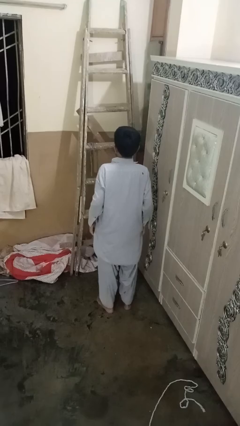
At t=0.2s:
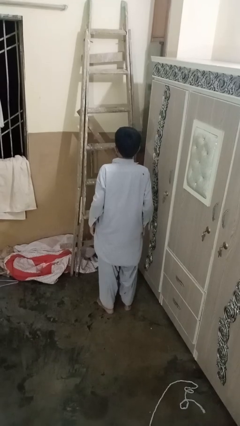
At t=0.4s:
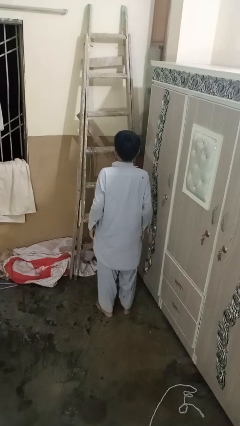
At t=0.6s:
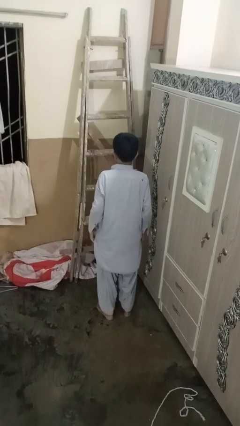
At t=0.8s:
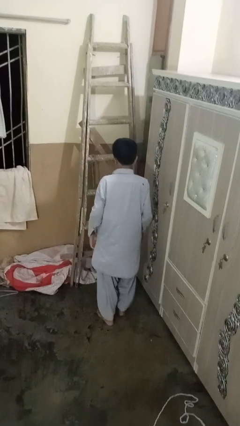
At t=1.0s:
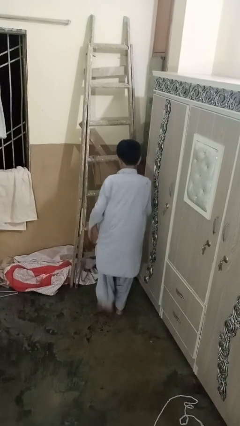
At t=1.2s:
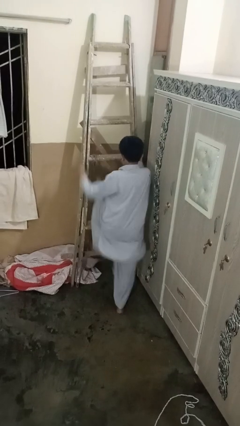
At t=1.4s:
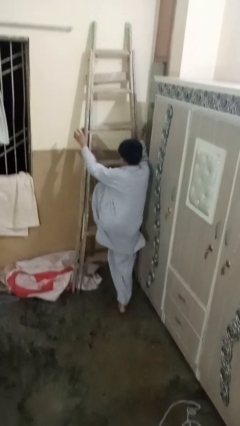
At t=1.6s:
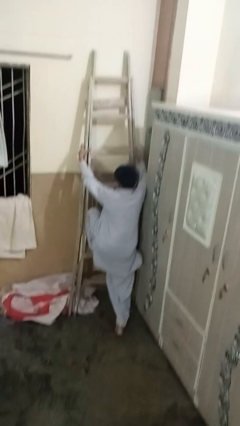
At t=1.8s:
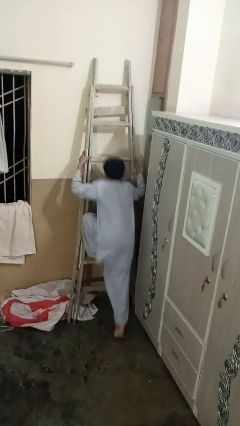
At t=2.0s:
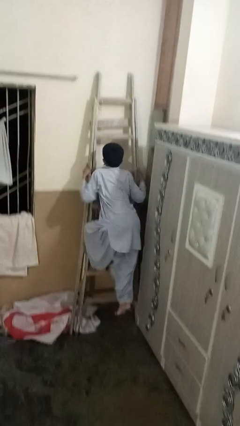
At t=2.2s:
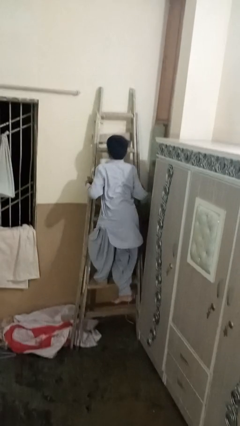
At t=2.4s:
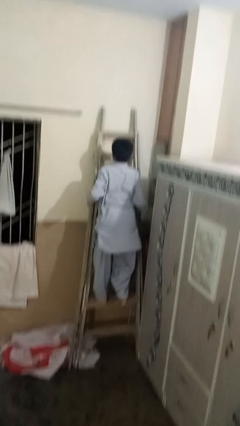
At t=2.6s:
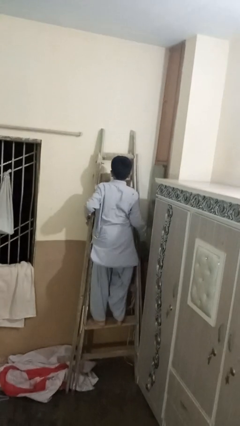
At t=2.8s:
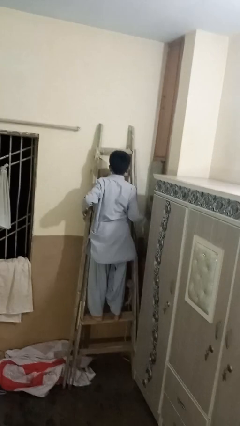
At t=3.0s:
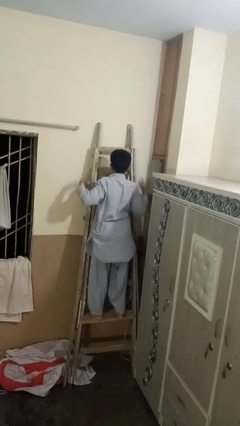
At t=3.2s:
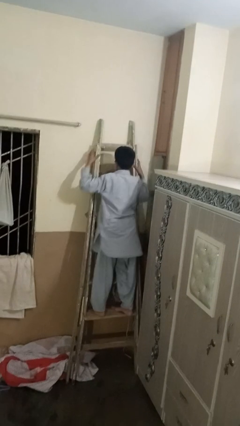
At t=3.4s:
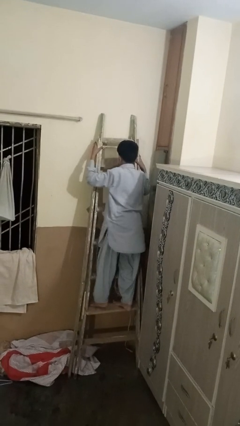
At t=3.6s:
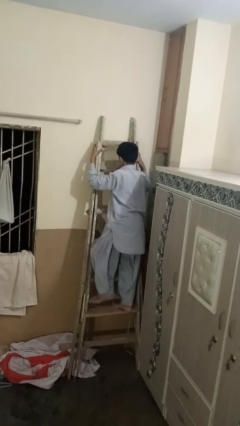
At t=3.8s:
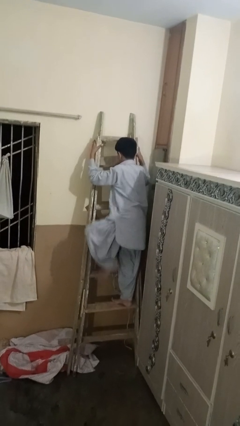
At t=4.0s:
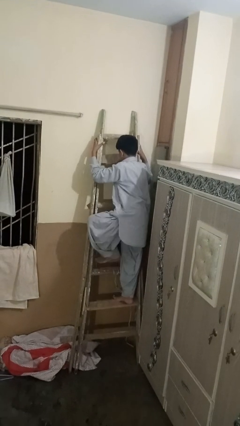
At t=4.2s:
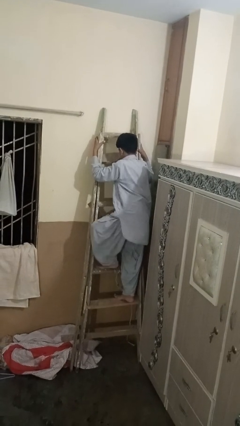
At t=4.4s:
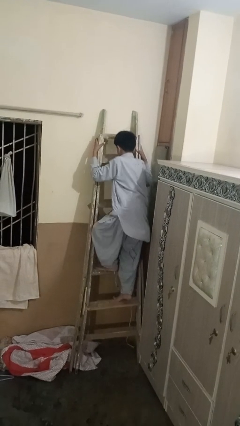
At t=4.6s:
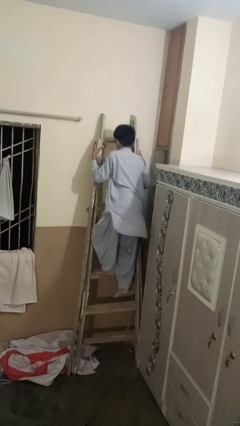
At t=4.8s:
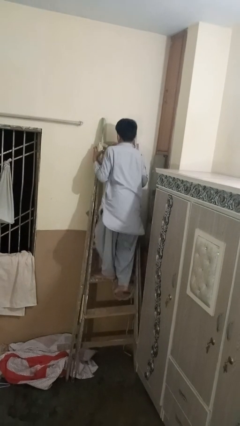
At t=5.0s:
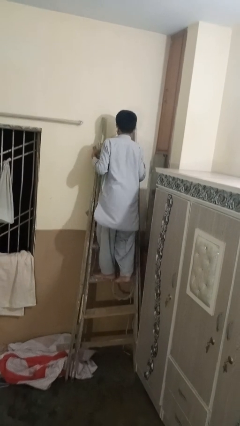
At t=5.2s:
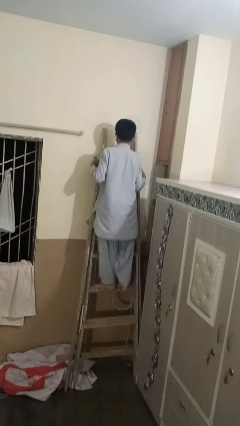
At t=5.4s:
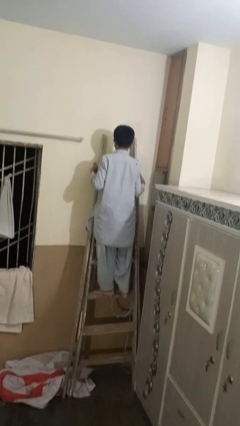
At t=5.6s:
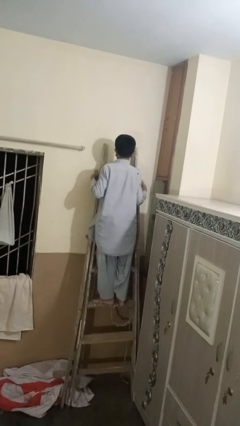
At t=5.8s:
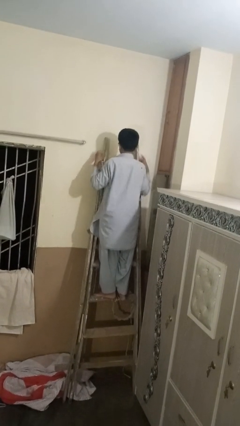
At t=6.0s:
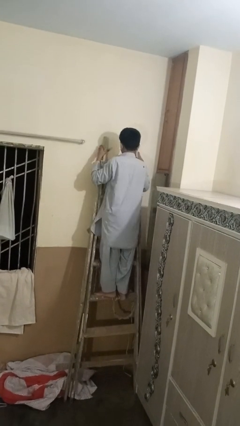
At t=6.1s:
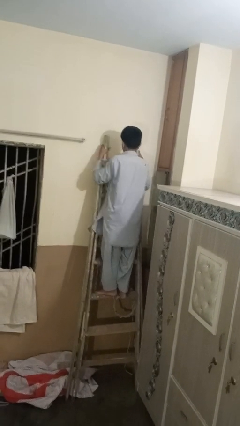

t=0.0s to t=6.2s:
person climbs up ladder

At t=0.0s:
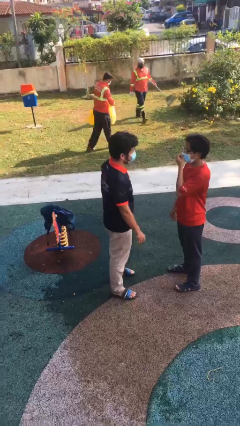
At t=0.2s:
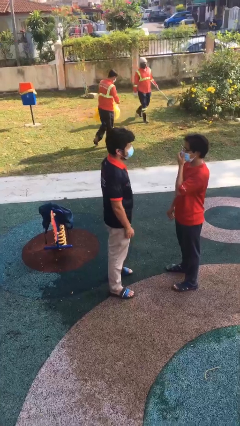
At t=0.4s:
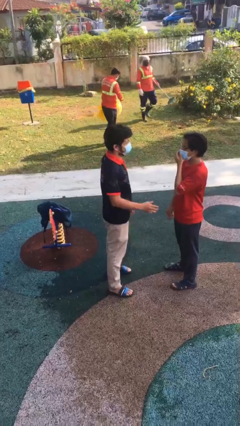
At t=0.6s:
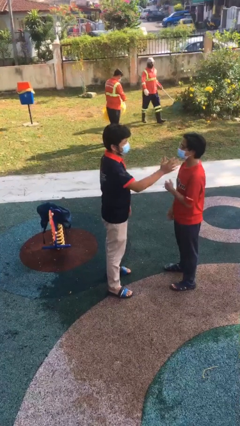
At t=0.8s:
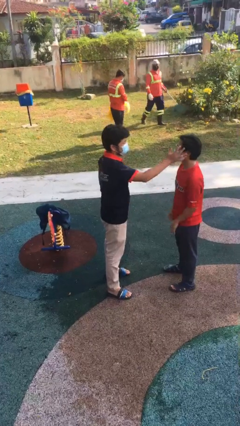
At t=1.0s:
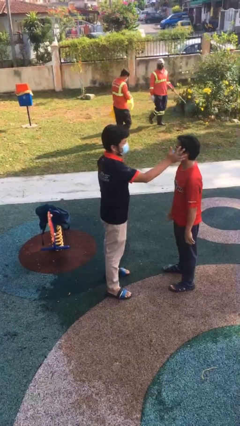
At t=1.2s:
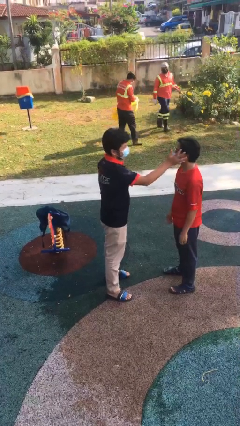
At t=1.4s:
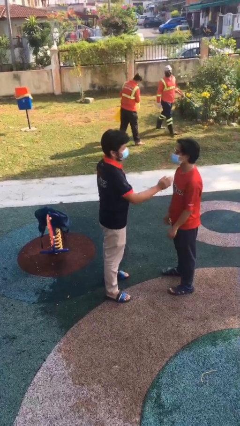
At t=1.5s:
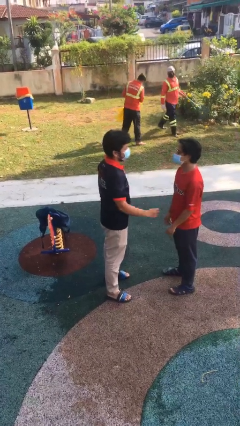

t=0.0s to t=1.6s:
person touches face of person

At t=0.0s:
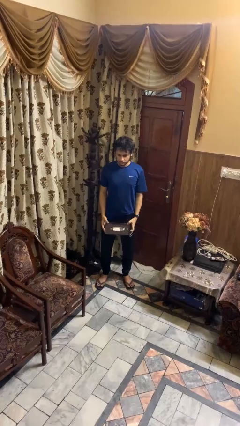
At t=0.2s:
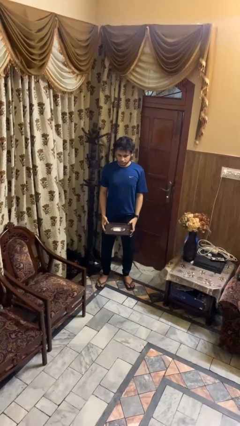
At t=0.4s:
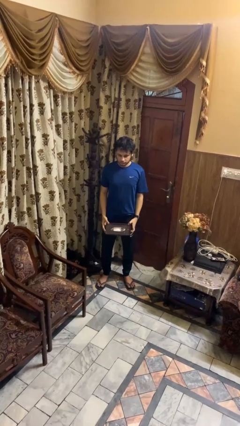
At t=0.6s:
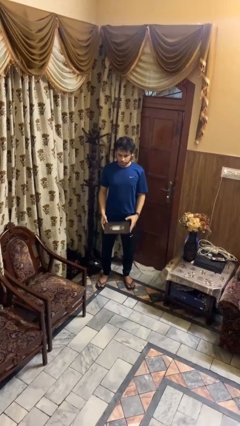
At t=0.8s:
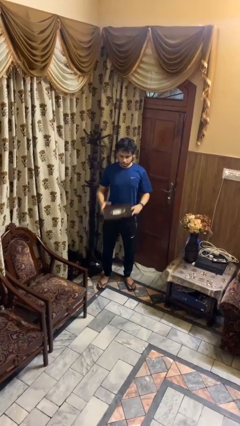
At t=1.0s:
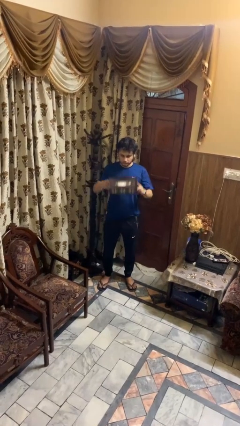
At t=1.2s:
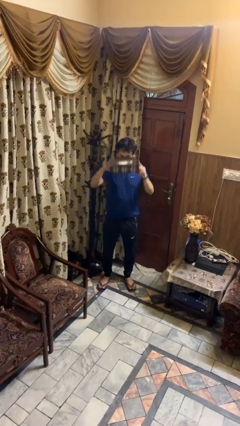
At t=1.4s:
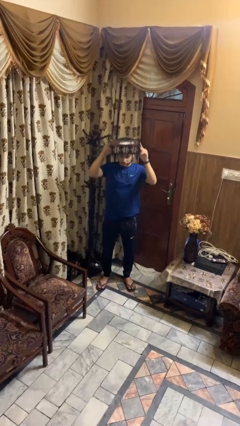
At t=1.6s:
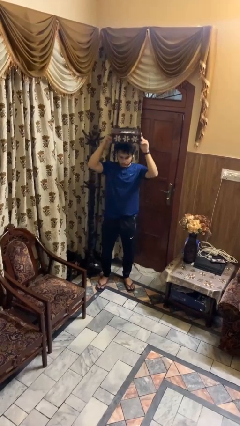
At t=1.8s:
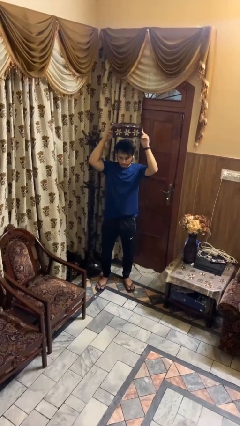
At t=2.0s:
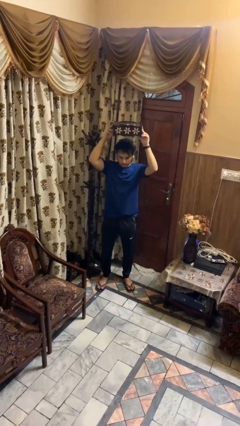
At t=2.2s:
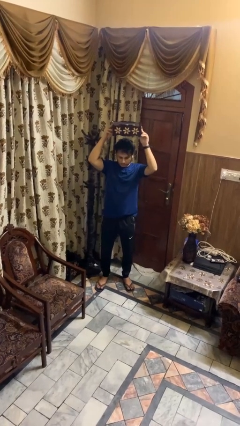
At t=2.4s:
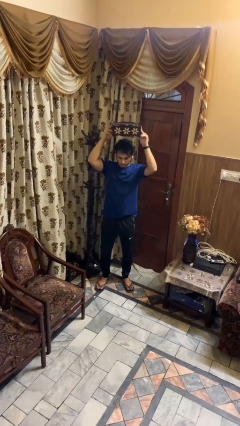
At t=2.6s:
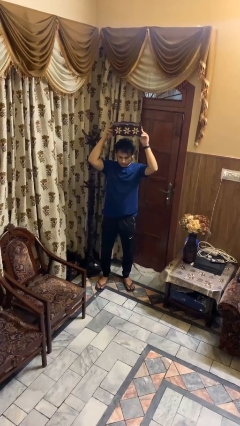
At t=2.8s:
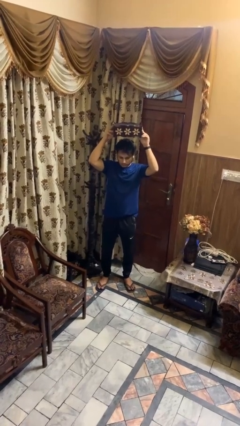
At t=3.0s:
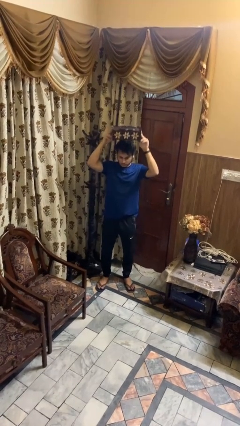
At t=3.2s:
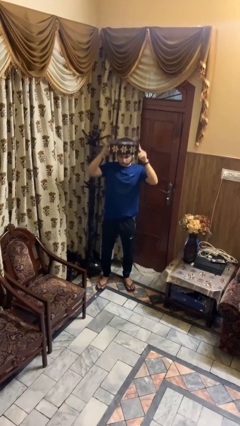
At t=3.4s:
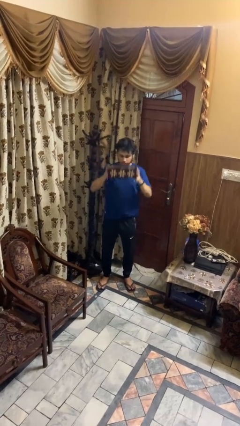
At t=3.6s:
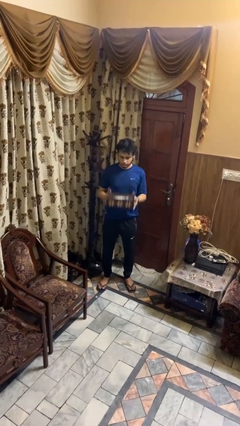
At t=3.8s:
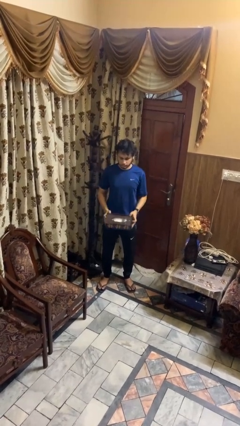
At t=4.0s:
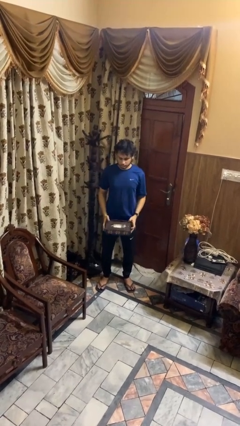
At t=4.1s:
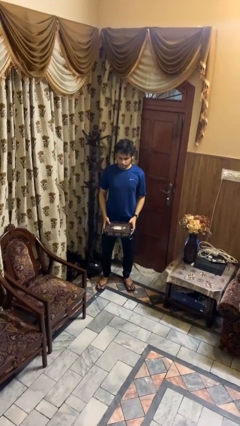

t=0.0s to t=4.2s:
person holds object above head

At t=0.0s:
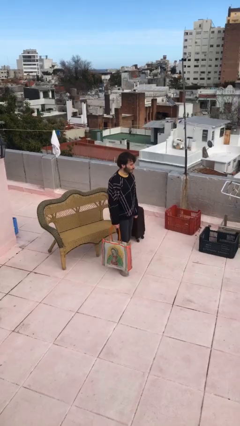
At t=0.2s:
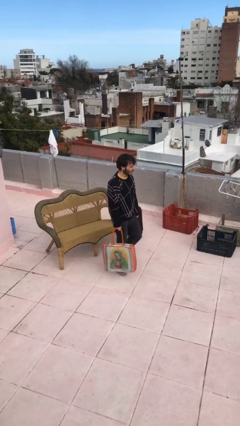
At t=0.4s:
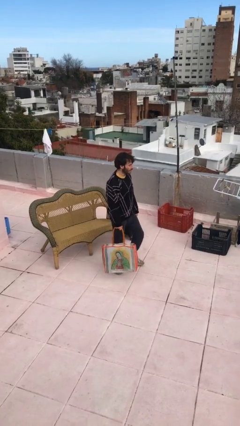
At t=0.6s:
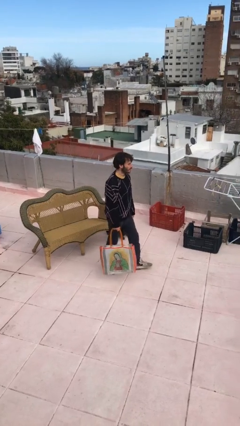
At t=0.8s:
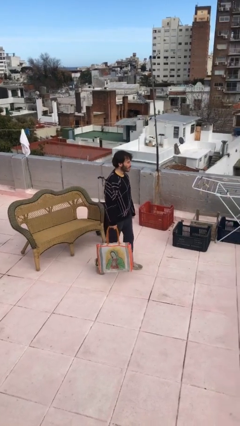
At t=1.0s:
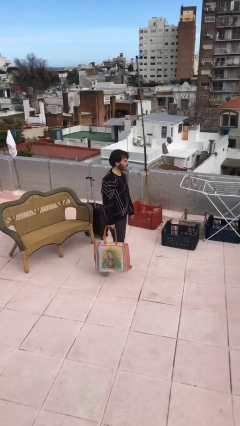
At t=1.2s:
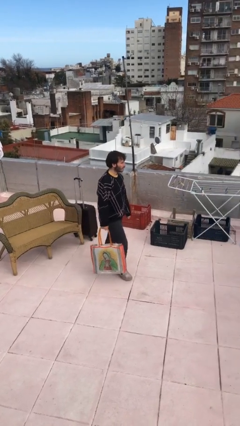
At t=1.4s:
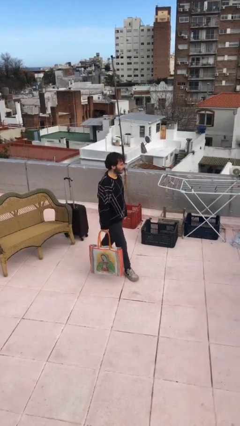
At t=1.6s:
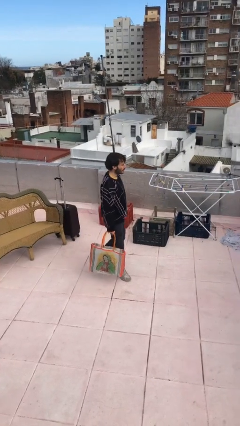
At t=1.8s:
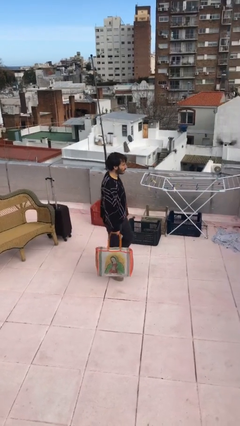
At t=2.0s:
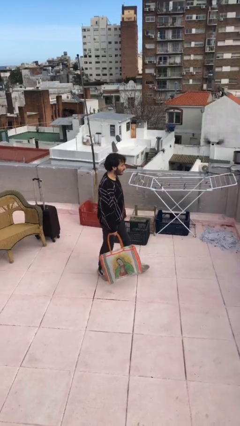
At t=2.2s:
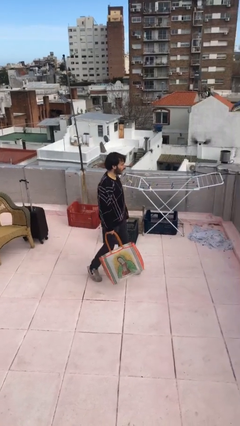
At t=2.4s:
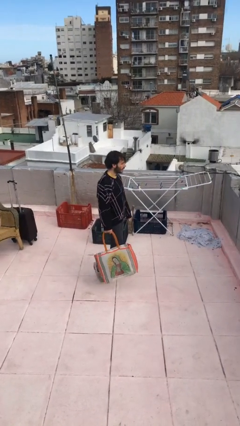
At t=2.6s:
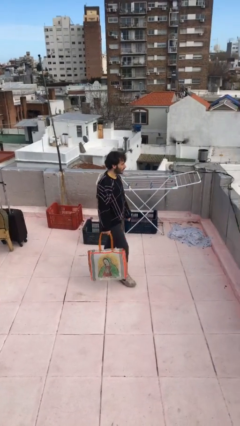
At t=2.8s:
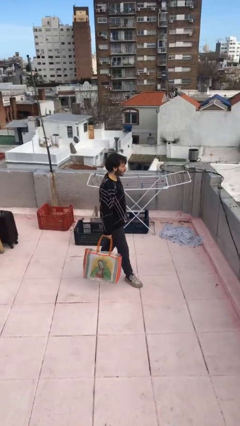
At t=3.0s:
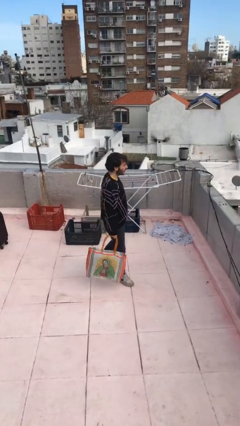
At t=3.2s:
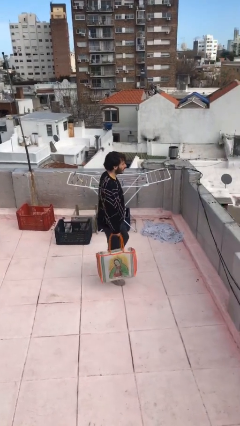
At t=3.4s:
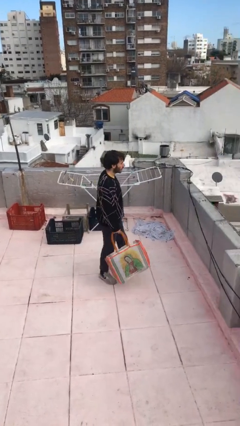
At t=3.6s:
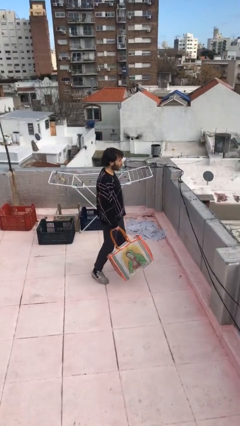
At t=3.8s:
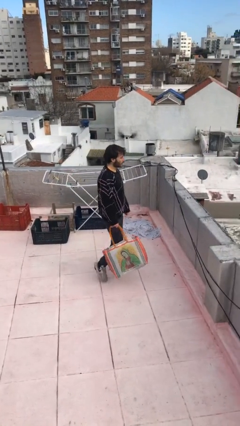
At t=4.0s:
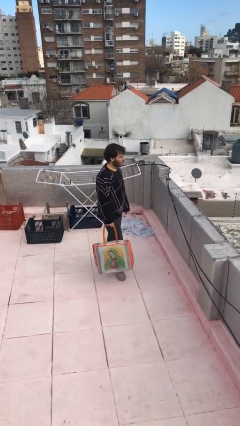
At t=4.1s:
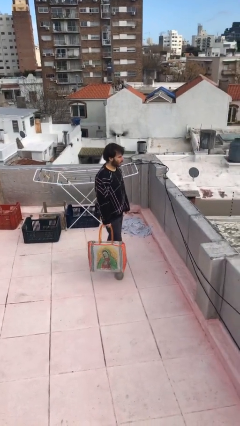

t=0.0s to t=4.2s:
person carries groceries

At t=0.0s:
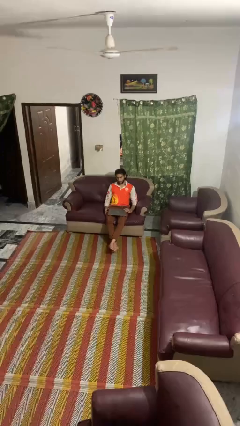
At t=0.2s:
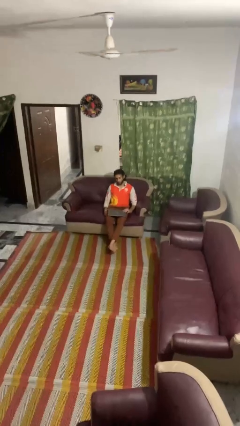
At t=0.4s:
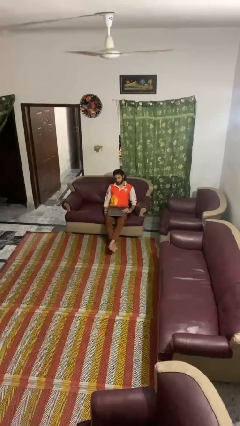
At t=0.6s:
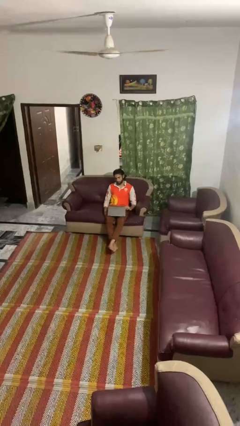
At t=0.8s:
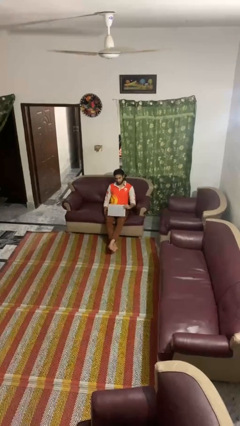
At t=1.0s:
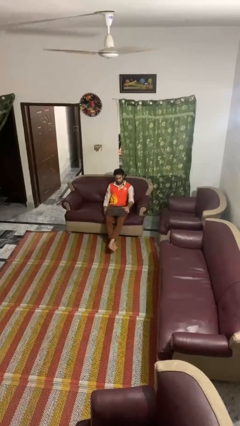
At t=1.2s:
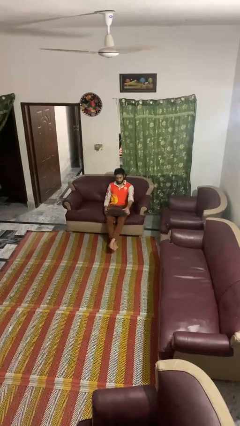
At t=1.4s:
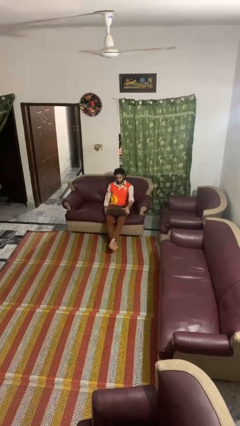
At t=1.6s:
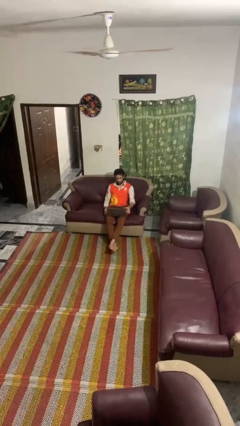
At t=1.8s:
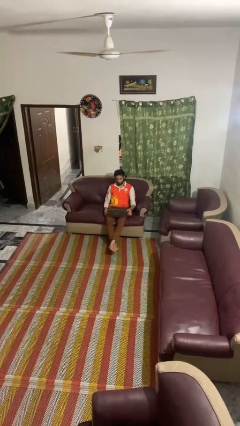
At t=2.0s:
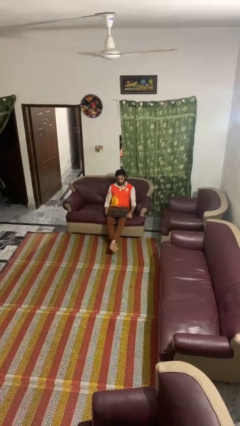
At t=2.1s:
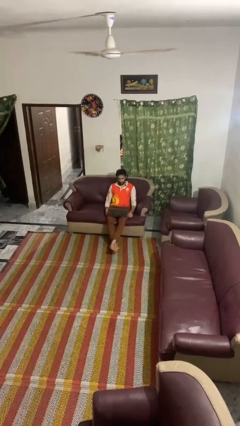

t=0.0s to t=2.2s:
person opens laptop
